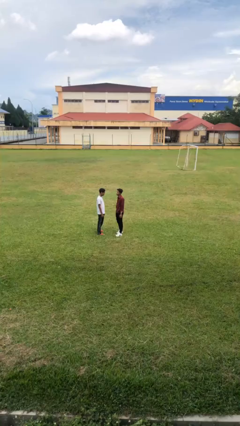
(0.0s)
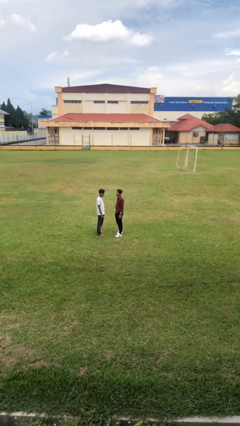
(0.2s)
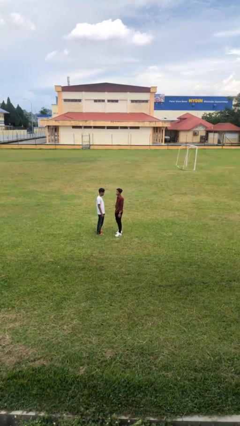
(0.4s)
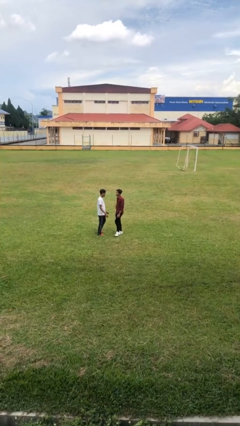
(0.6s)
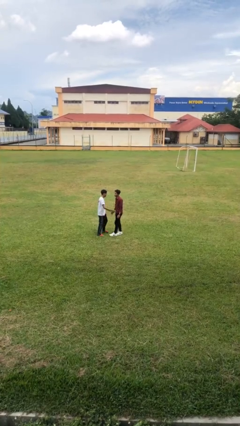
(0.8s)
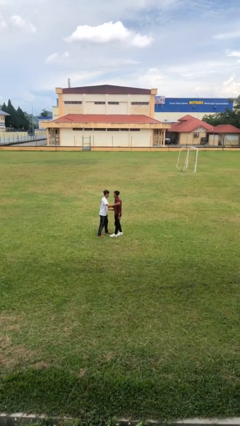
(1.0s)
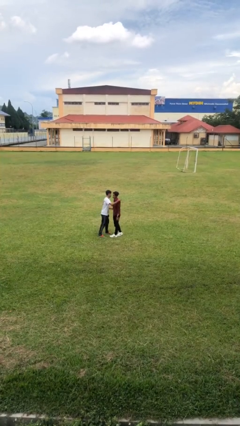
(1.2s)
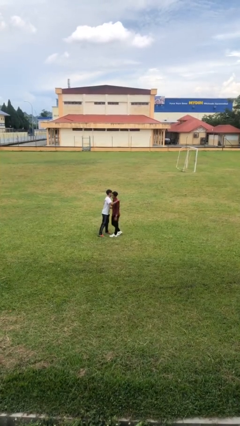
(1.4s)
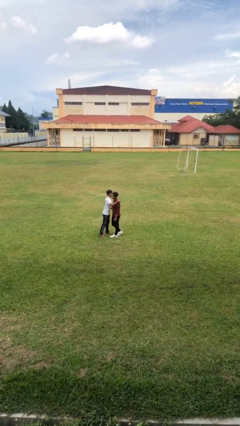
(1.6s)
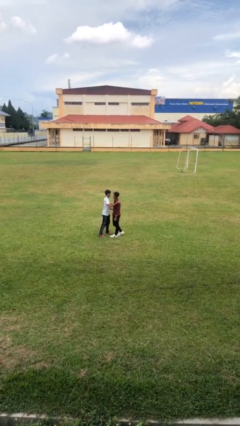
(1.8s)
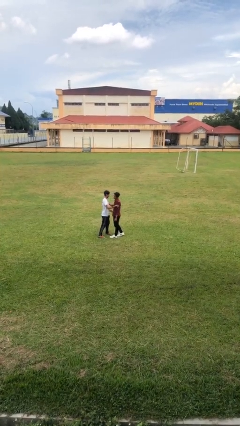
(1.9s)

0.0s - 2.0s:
person embraces person

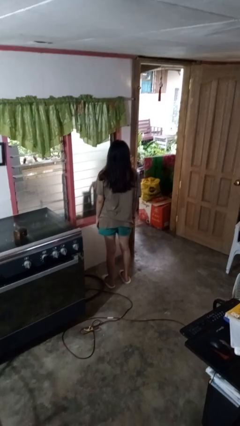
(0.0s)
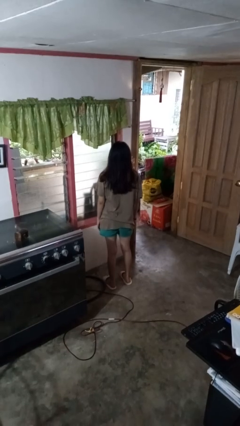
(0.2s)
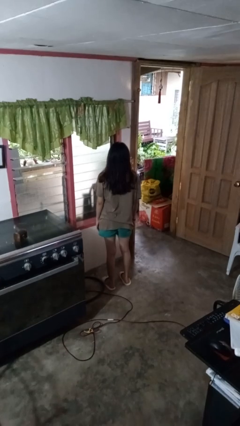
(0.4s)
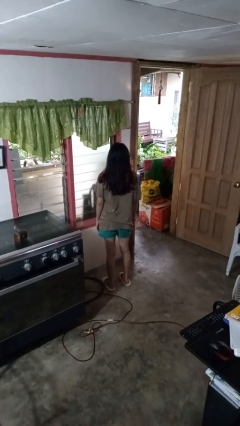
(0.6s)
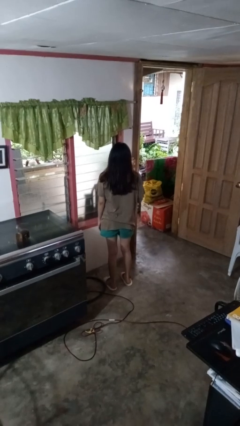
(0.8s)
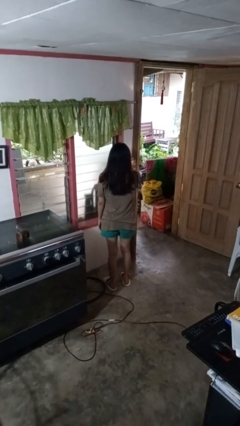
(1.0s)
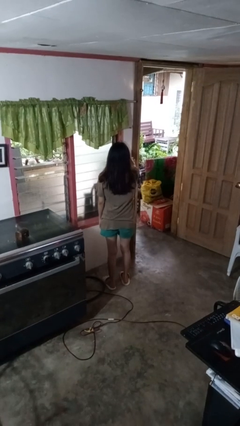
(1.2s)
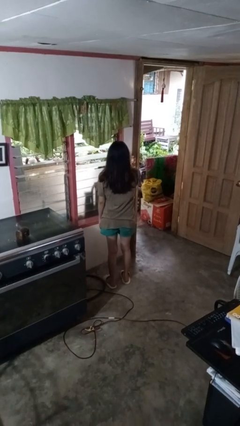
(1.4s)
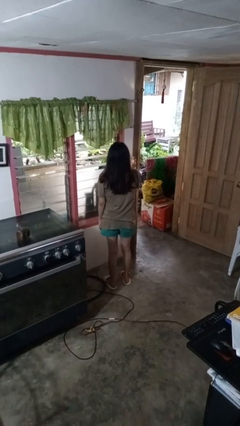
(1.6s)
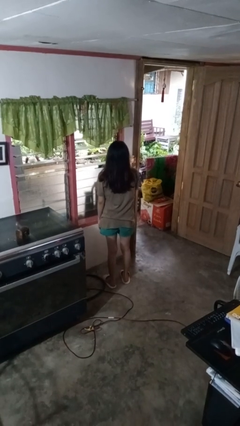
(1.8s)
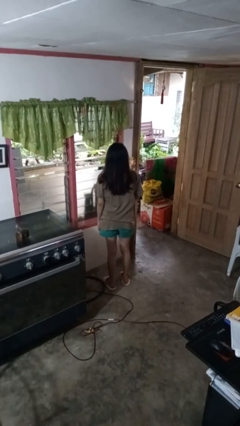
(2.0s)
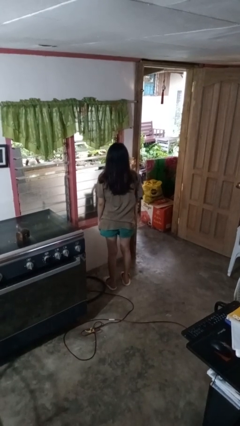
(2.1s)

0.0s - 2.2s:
person opens home window

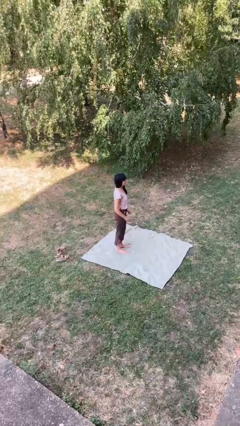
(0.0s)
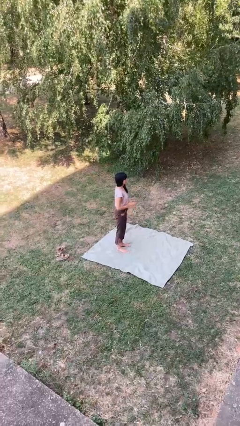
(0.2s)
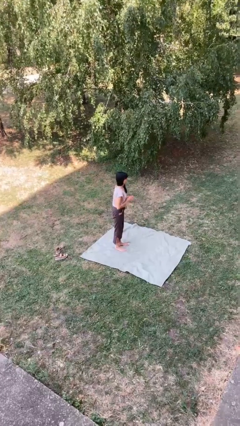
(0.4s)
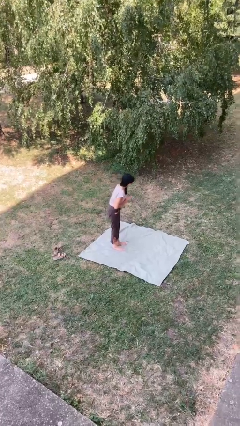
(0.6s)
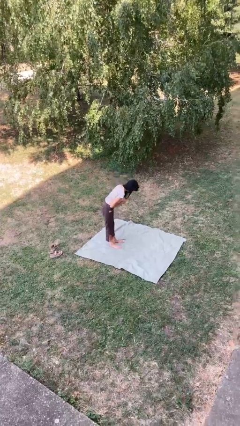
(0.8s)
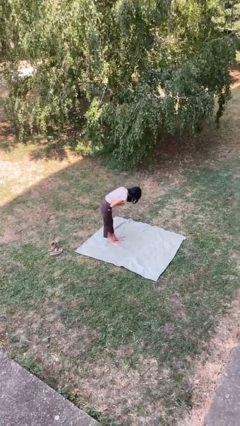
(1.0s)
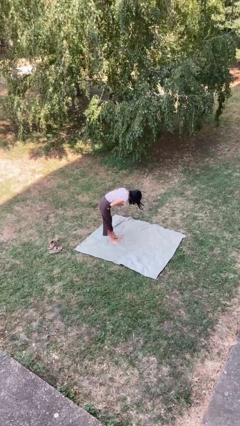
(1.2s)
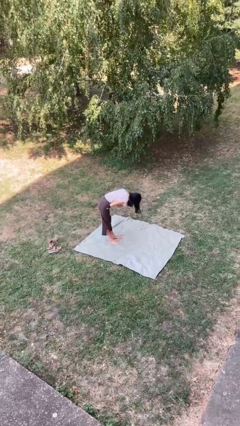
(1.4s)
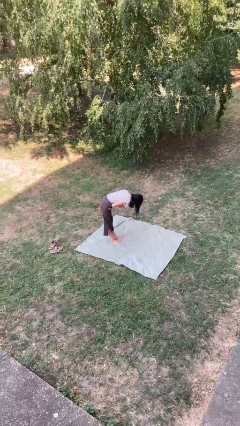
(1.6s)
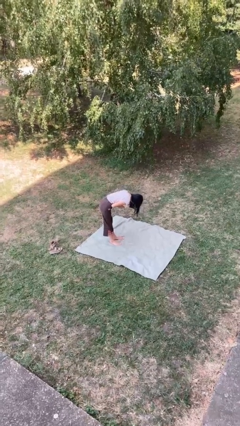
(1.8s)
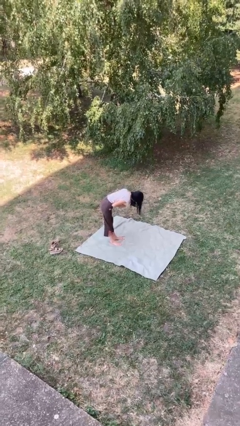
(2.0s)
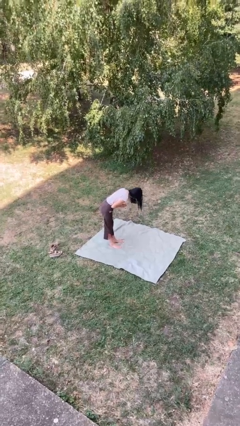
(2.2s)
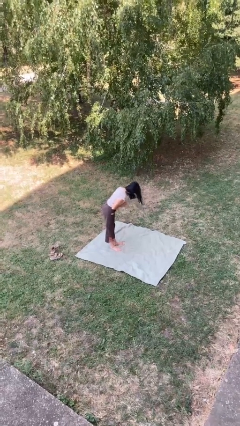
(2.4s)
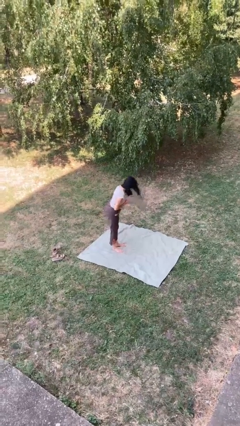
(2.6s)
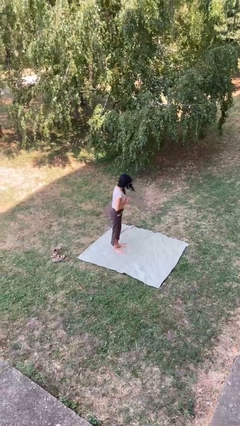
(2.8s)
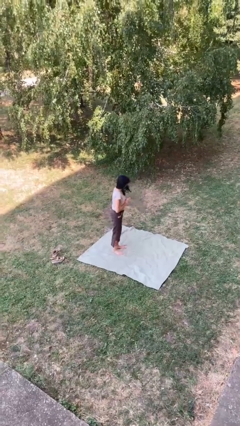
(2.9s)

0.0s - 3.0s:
person bows

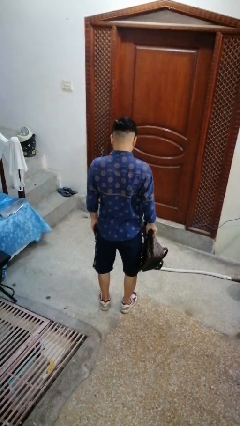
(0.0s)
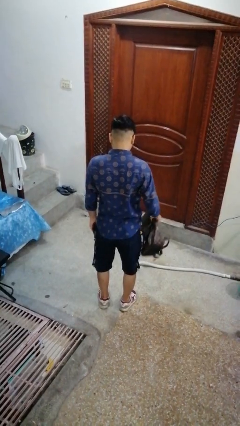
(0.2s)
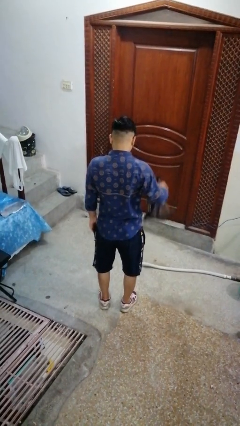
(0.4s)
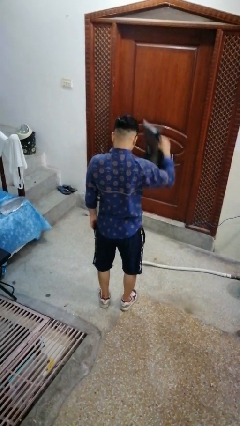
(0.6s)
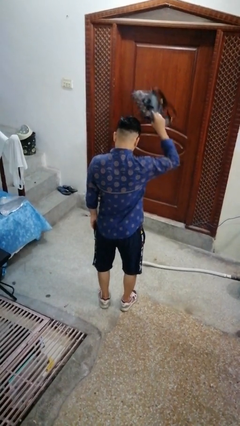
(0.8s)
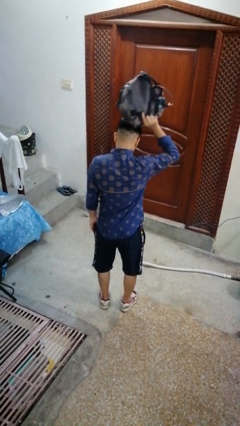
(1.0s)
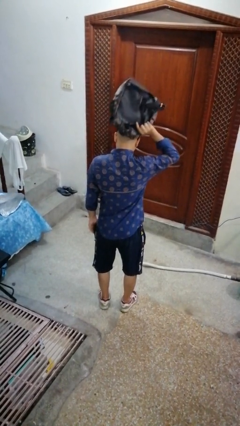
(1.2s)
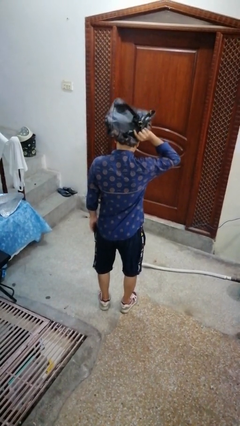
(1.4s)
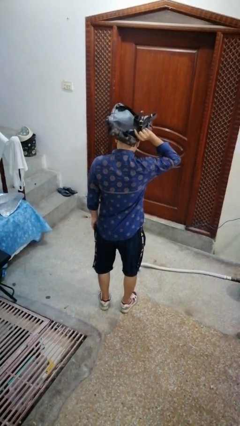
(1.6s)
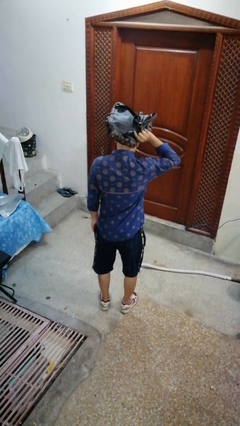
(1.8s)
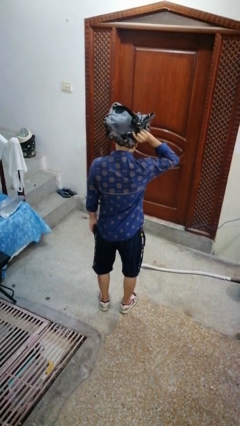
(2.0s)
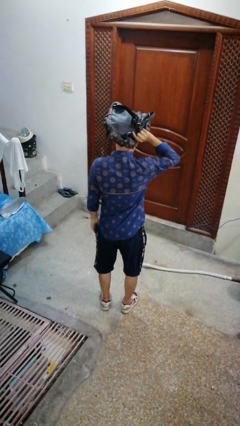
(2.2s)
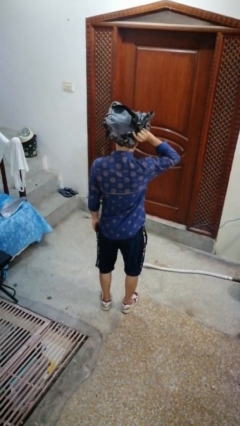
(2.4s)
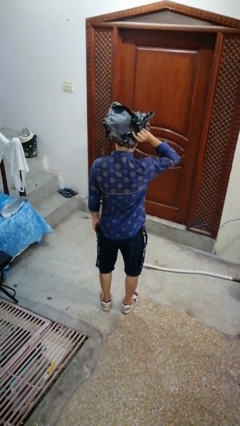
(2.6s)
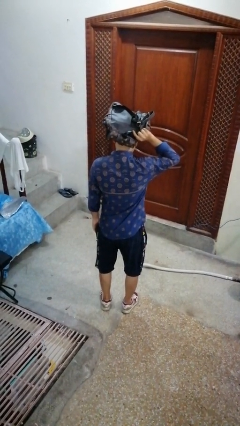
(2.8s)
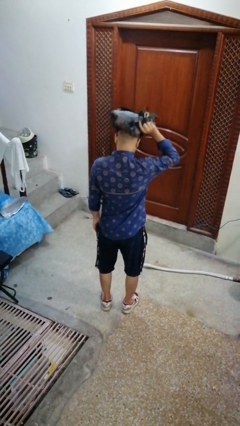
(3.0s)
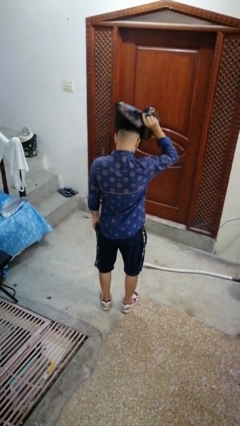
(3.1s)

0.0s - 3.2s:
person holds object above head

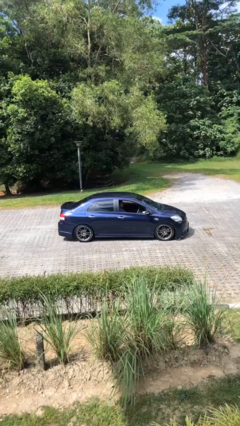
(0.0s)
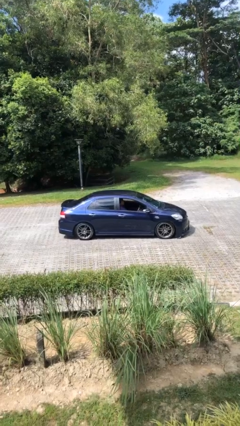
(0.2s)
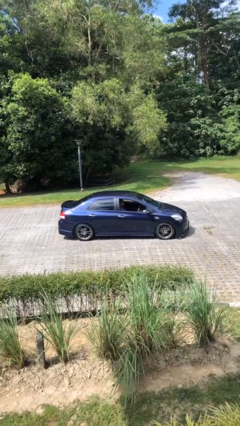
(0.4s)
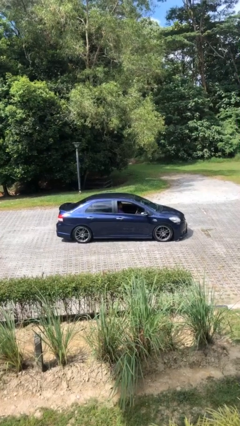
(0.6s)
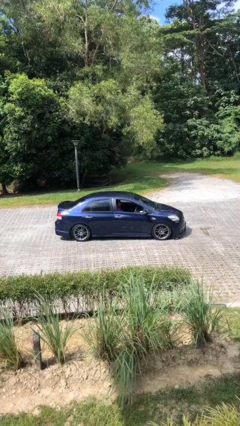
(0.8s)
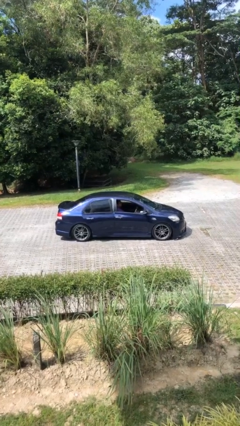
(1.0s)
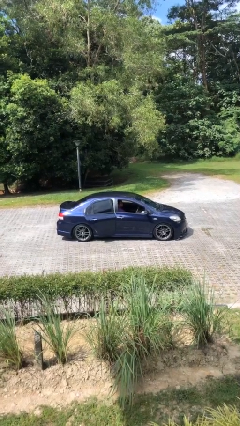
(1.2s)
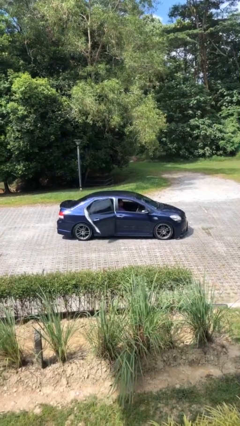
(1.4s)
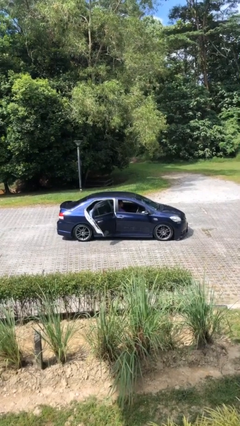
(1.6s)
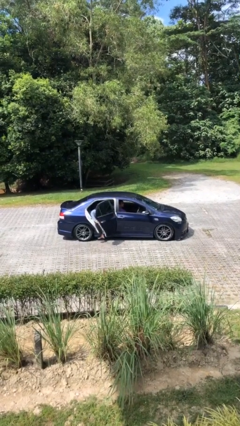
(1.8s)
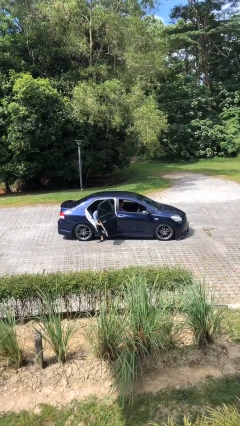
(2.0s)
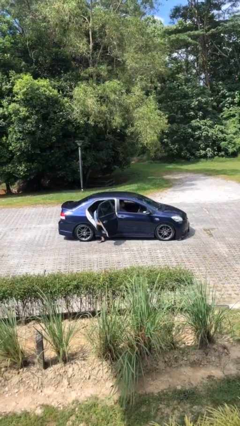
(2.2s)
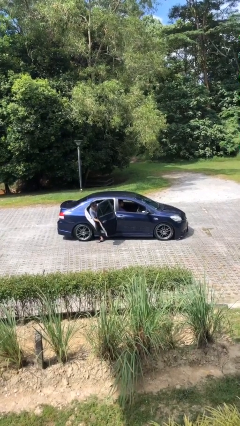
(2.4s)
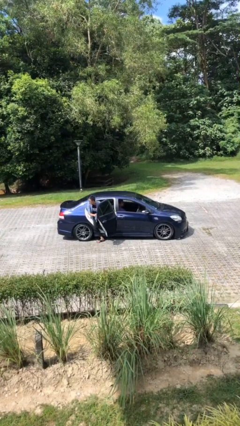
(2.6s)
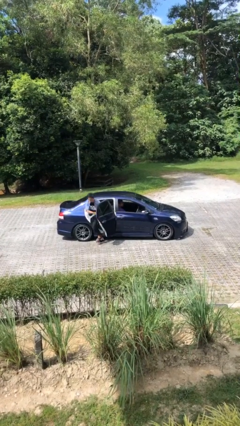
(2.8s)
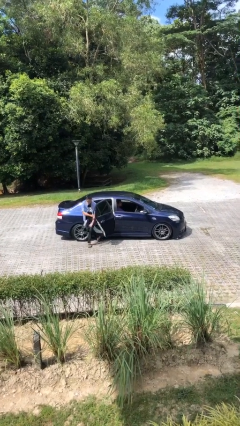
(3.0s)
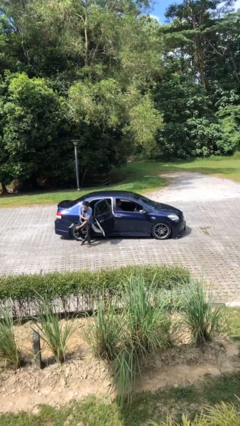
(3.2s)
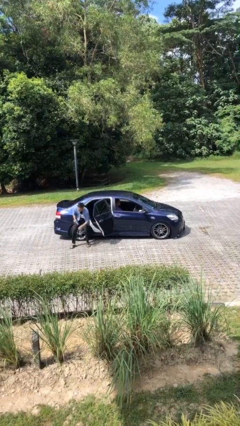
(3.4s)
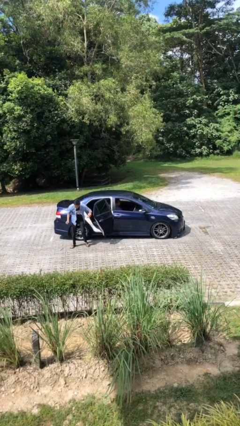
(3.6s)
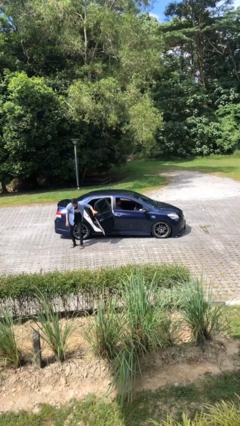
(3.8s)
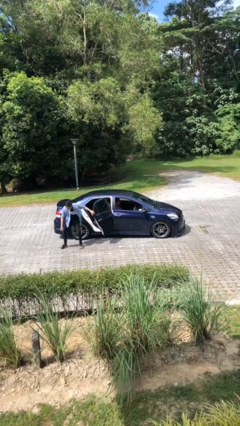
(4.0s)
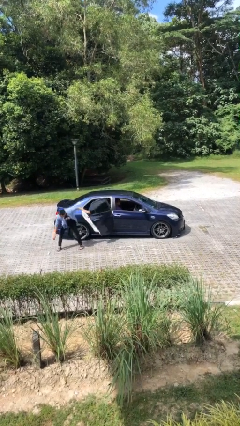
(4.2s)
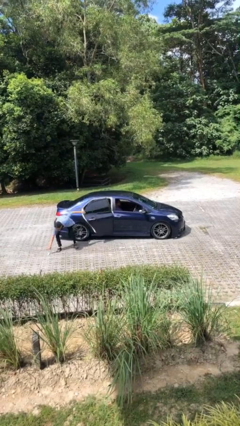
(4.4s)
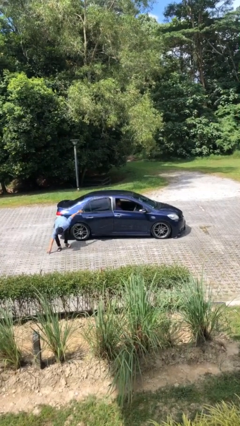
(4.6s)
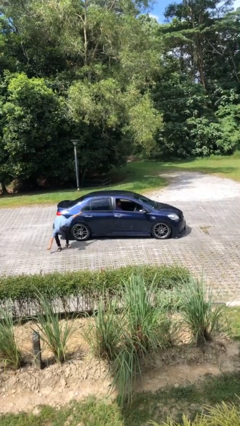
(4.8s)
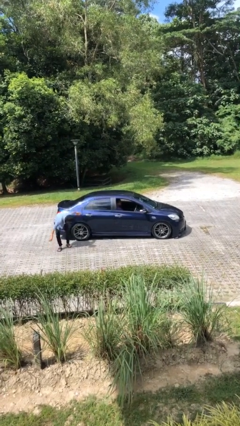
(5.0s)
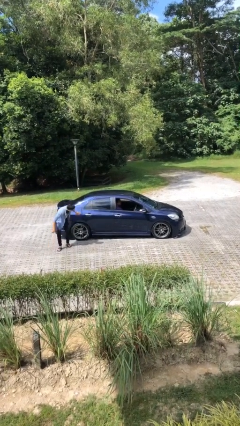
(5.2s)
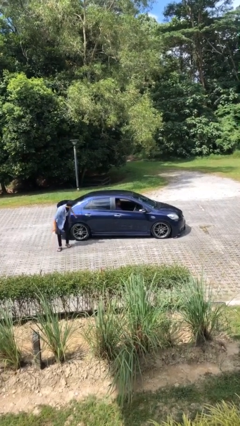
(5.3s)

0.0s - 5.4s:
car drops off person

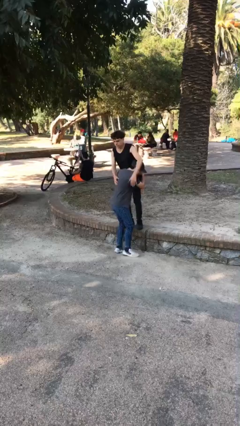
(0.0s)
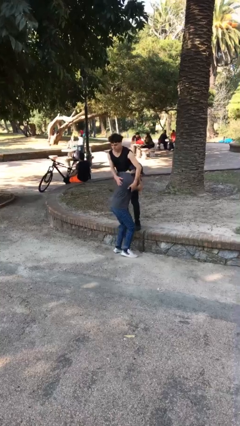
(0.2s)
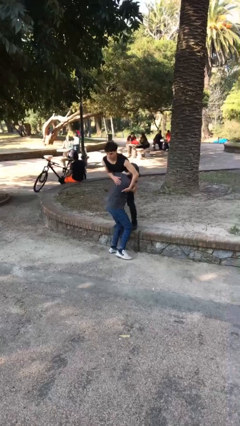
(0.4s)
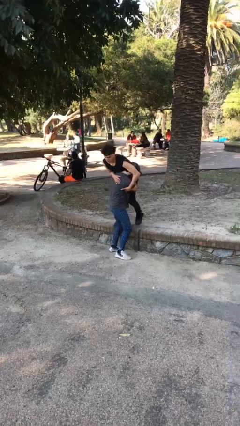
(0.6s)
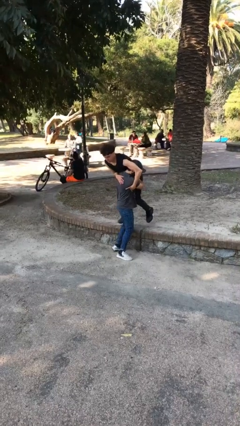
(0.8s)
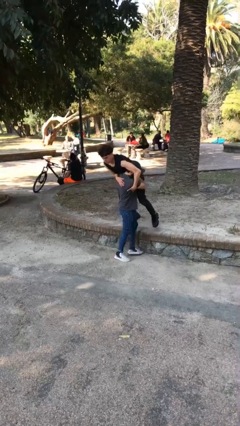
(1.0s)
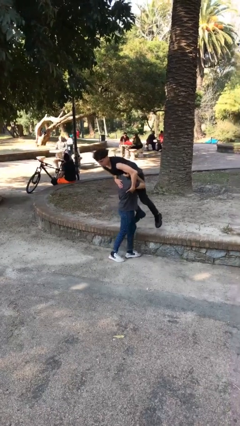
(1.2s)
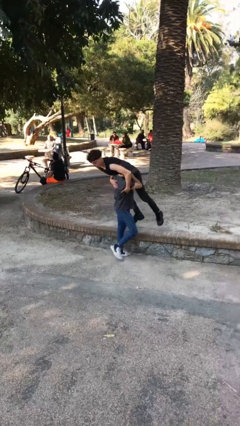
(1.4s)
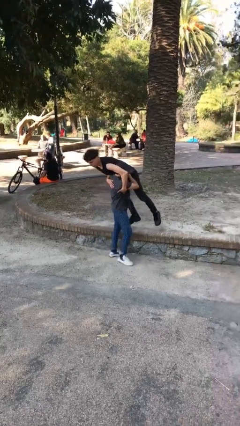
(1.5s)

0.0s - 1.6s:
person carries person over shoulder
